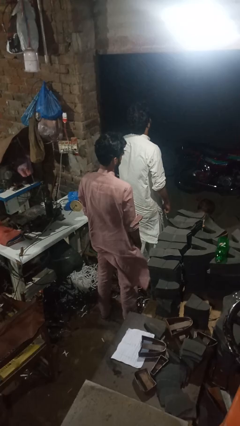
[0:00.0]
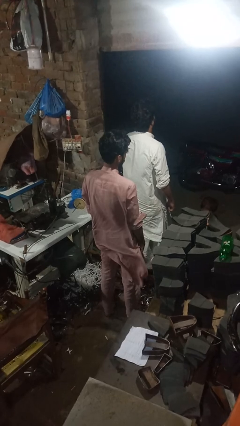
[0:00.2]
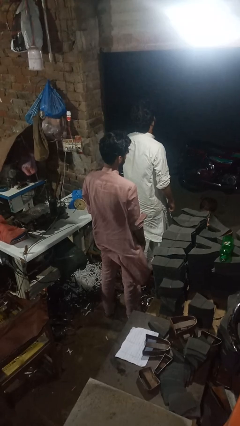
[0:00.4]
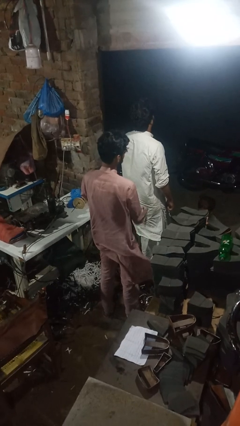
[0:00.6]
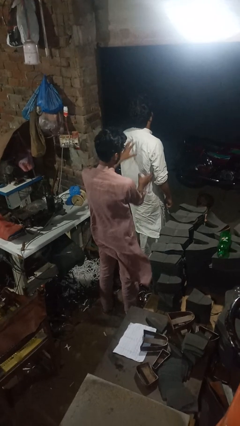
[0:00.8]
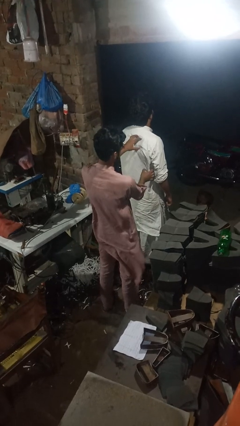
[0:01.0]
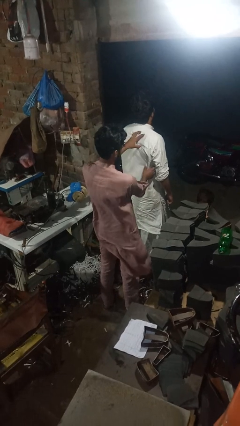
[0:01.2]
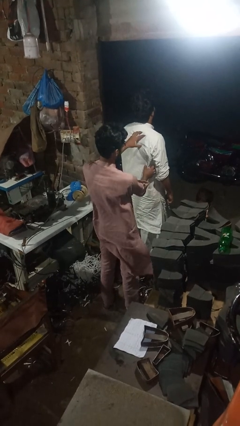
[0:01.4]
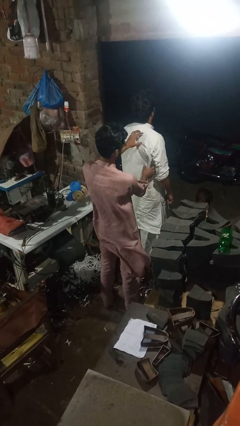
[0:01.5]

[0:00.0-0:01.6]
person tickles person

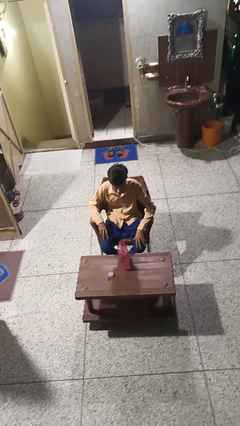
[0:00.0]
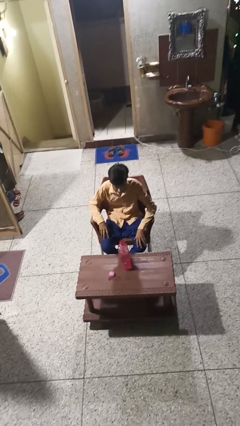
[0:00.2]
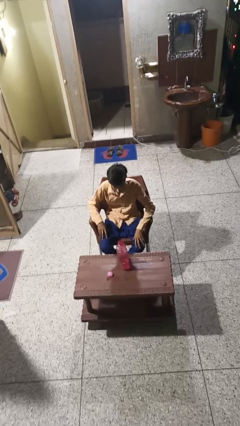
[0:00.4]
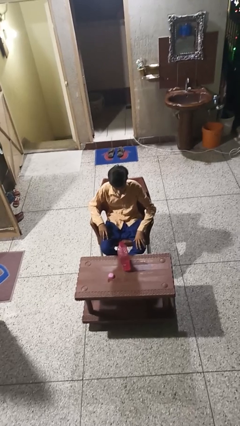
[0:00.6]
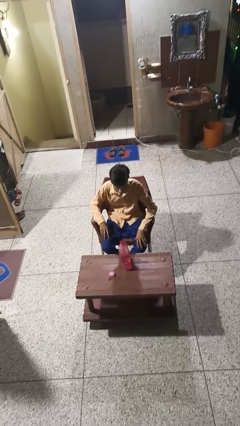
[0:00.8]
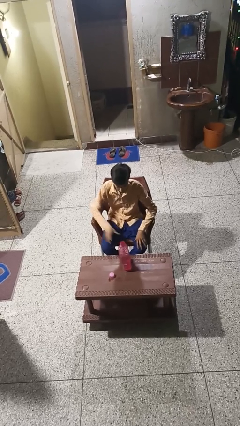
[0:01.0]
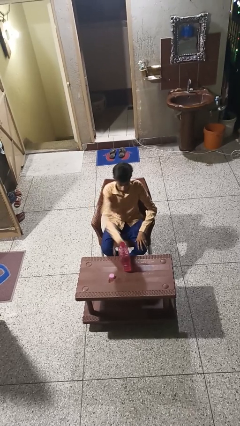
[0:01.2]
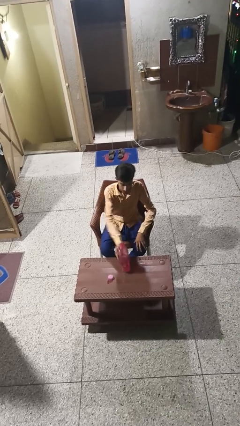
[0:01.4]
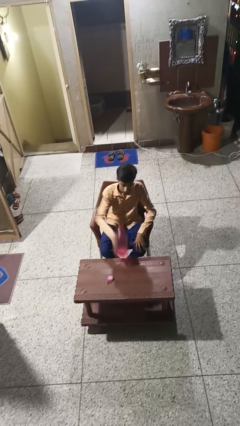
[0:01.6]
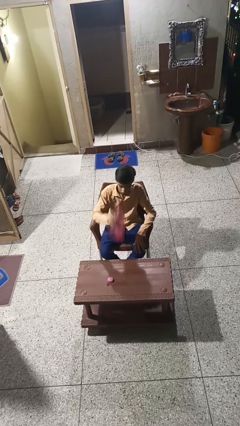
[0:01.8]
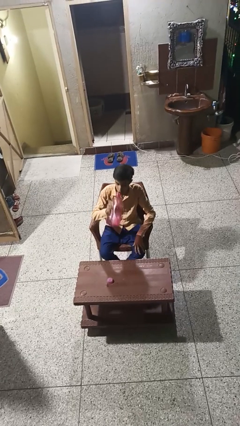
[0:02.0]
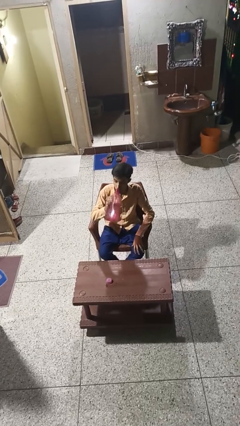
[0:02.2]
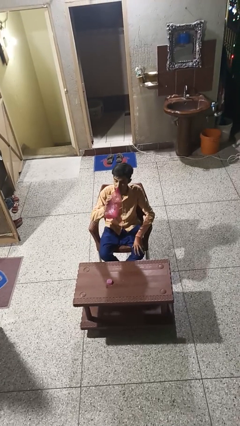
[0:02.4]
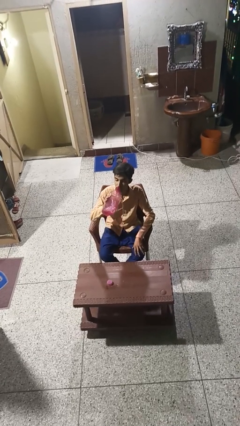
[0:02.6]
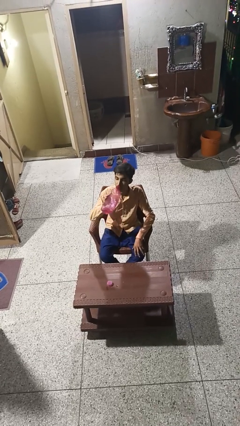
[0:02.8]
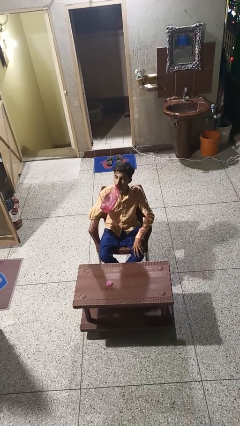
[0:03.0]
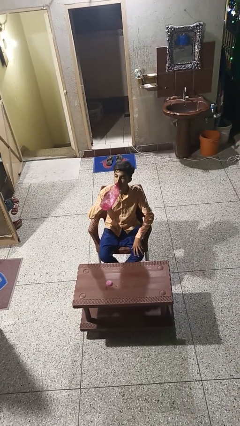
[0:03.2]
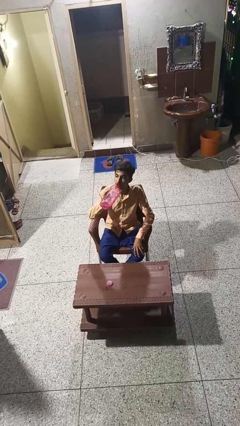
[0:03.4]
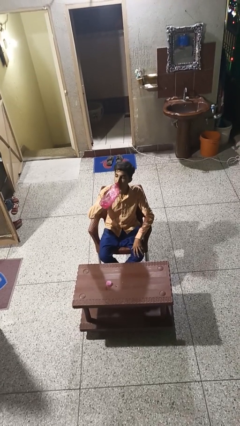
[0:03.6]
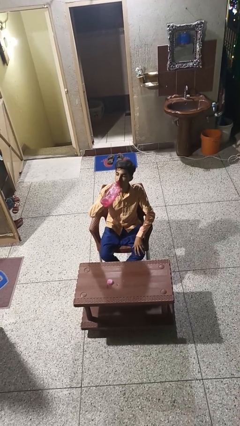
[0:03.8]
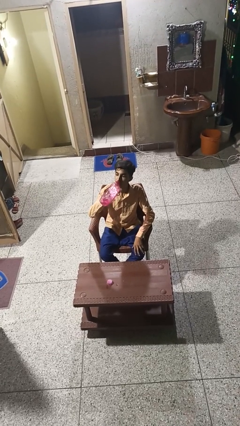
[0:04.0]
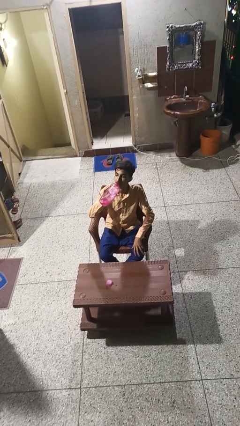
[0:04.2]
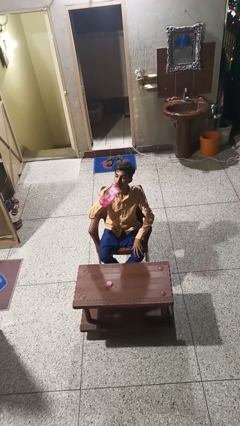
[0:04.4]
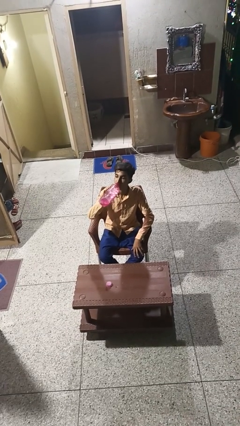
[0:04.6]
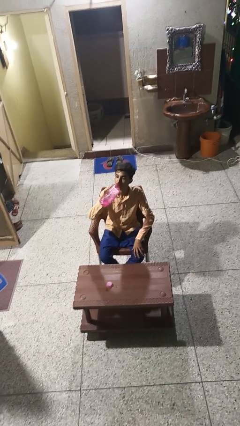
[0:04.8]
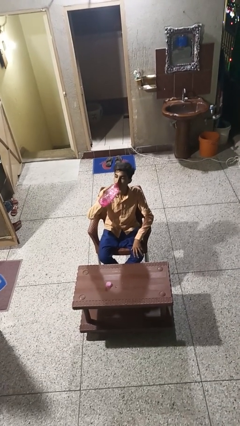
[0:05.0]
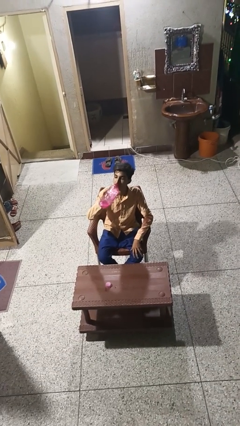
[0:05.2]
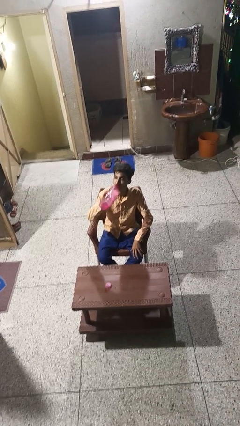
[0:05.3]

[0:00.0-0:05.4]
person drinks from bottle

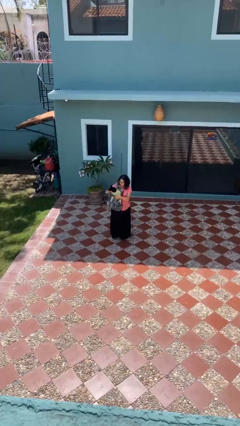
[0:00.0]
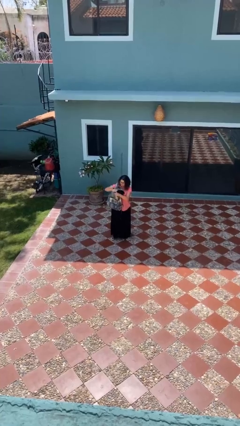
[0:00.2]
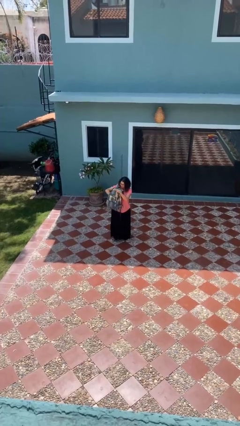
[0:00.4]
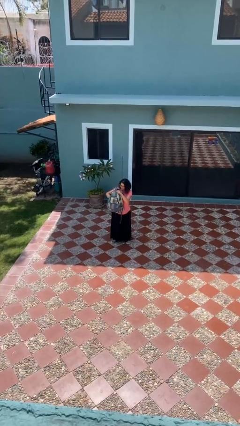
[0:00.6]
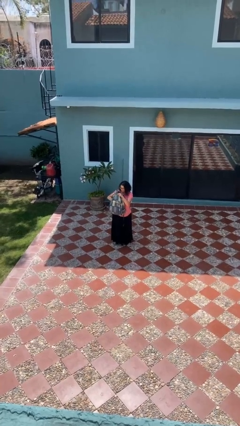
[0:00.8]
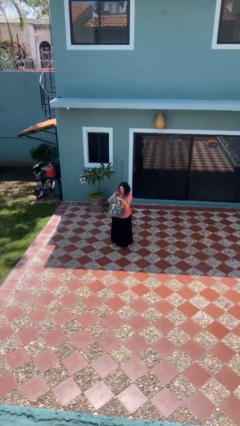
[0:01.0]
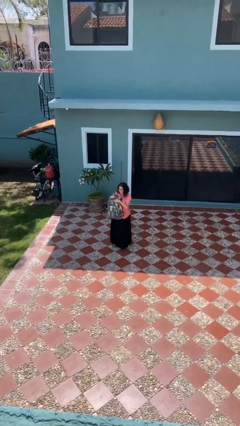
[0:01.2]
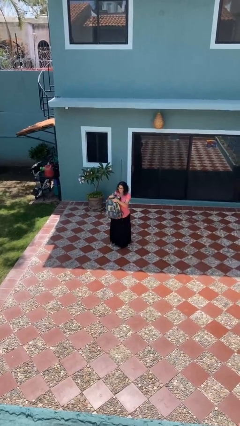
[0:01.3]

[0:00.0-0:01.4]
person puts object into backpack

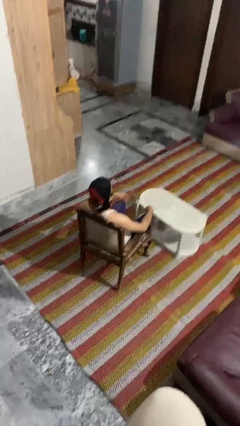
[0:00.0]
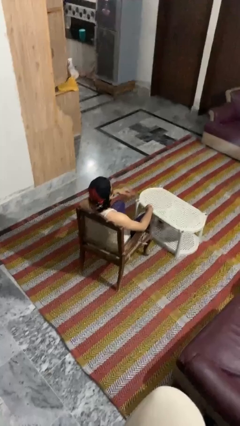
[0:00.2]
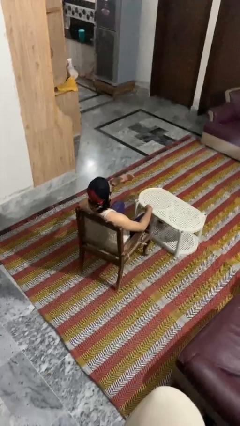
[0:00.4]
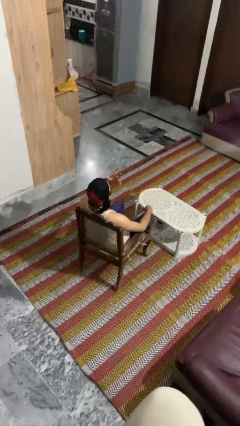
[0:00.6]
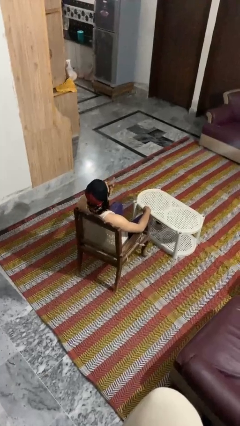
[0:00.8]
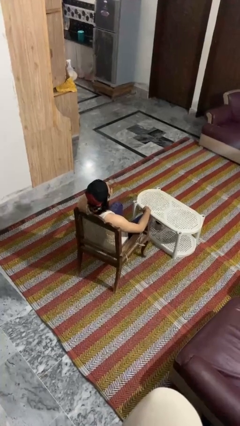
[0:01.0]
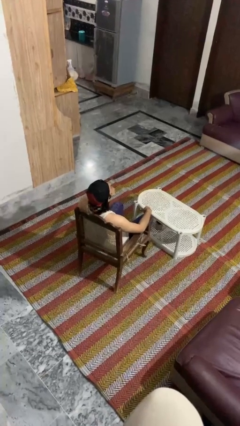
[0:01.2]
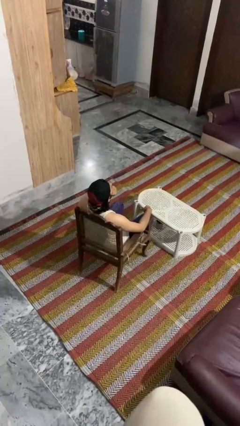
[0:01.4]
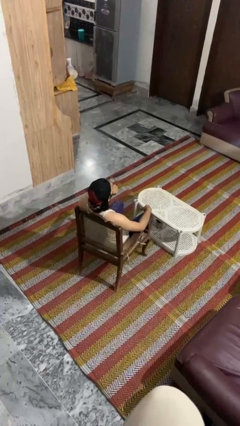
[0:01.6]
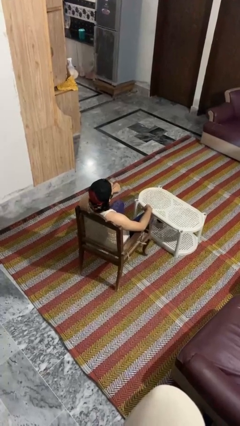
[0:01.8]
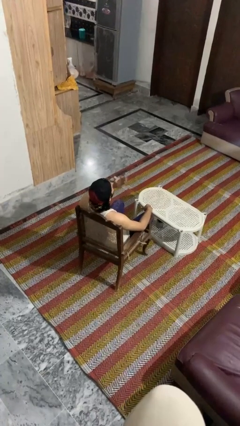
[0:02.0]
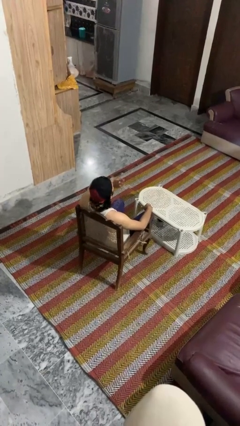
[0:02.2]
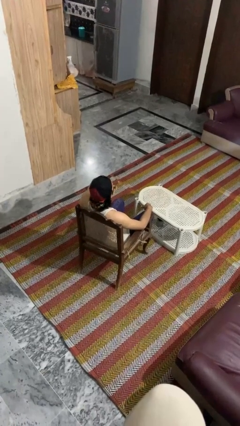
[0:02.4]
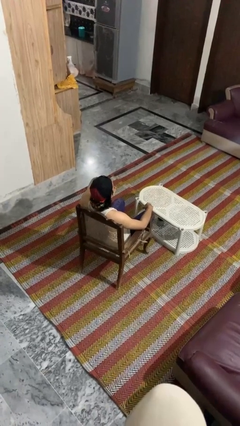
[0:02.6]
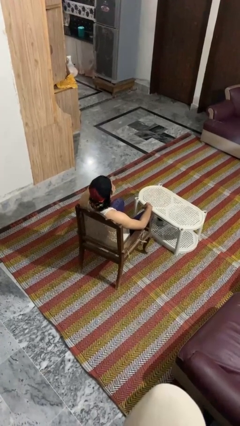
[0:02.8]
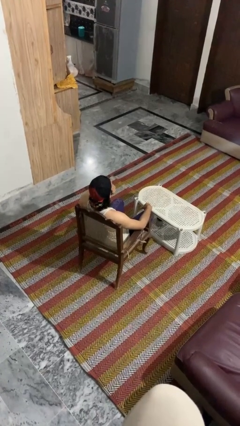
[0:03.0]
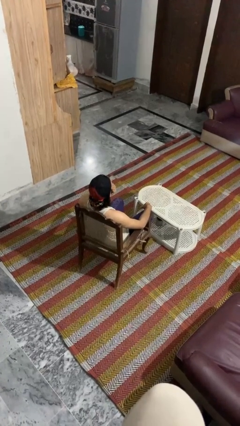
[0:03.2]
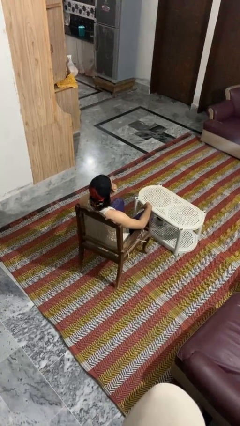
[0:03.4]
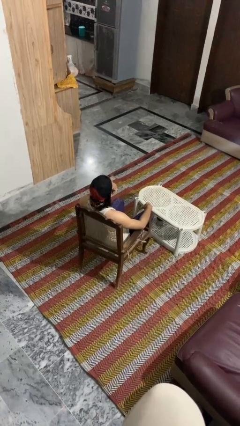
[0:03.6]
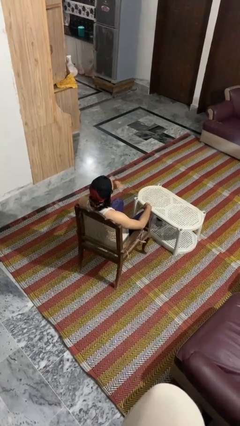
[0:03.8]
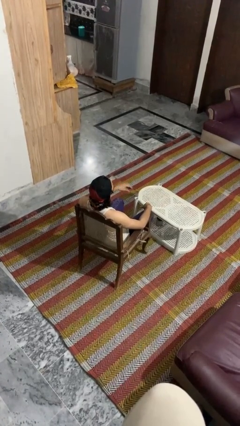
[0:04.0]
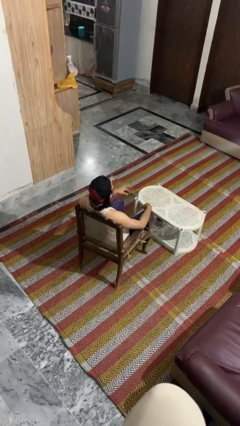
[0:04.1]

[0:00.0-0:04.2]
person strokes chin

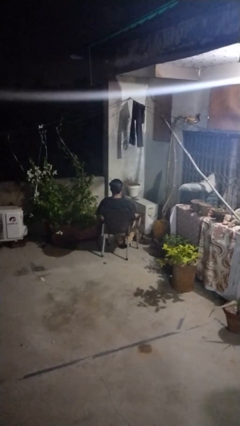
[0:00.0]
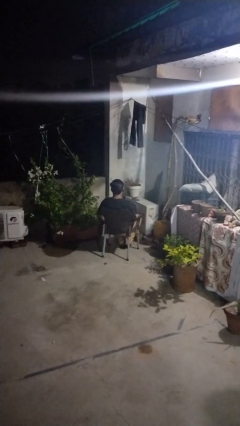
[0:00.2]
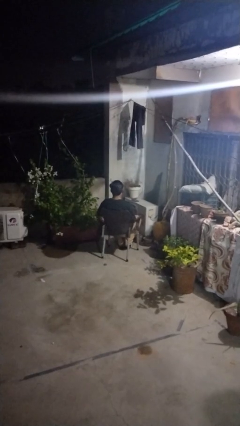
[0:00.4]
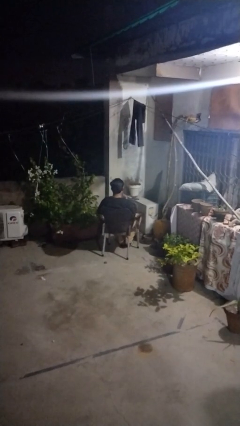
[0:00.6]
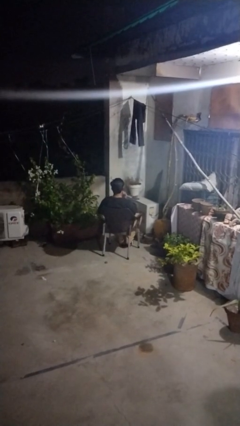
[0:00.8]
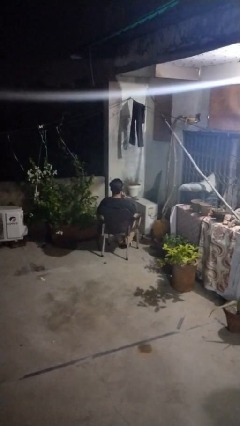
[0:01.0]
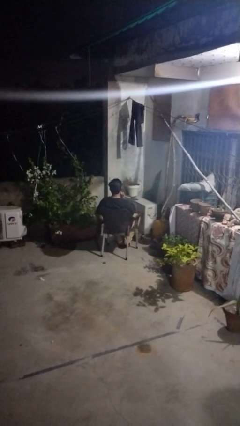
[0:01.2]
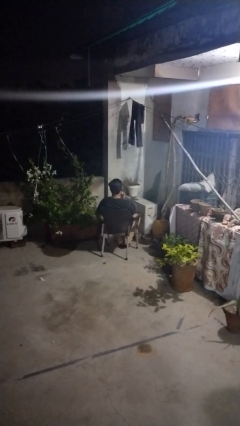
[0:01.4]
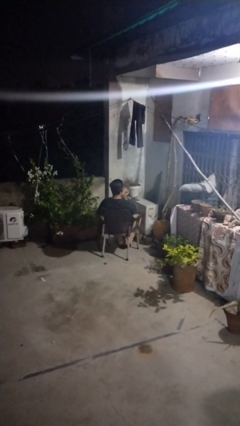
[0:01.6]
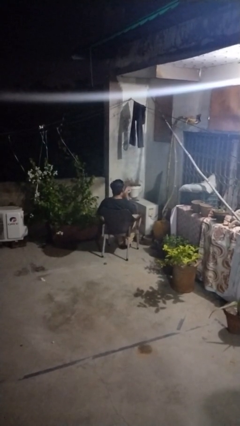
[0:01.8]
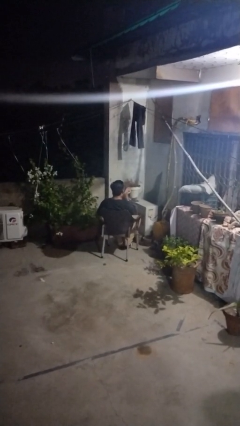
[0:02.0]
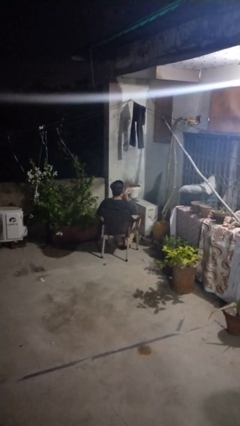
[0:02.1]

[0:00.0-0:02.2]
person gestures blow kiss

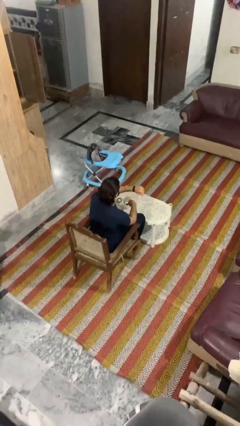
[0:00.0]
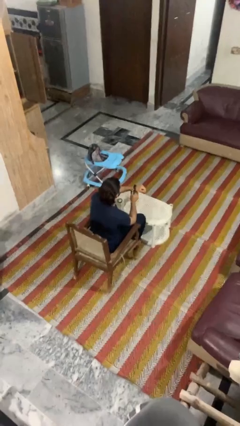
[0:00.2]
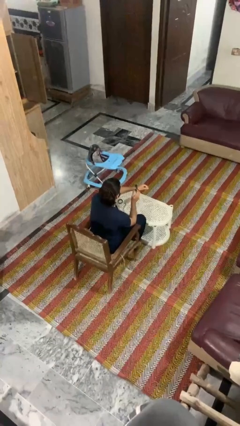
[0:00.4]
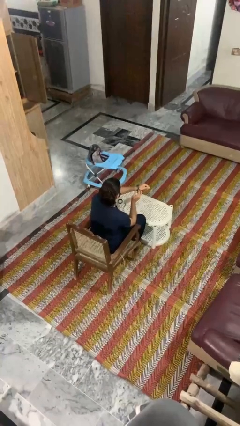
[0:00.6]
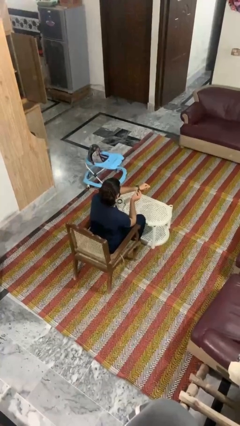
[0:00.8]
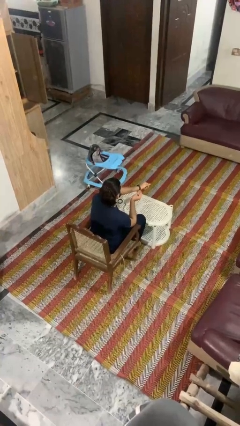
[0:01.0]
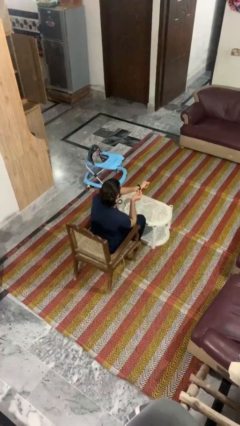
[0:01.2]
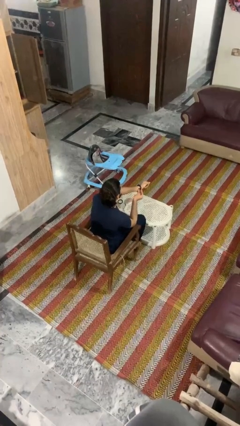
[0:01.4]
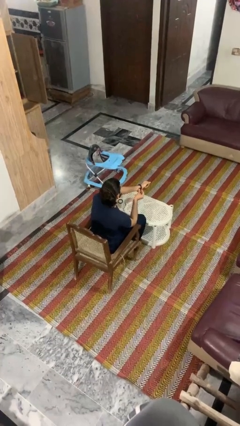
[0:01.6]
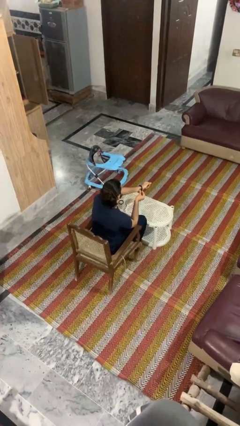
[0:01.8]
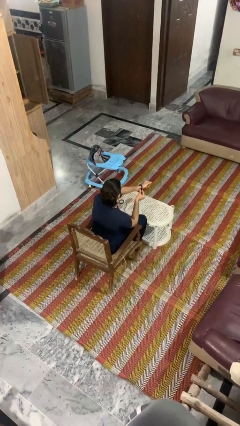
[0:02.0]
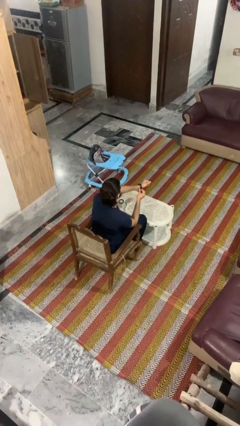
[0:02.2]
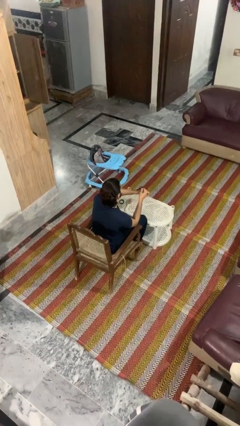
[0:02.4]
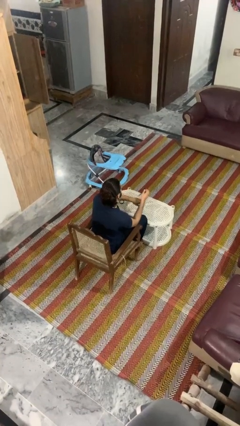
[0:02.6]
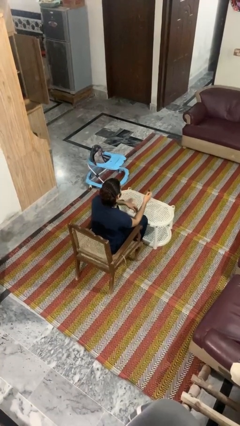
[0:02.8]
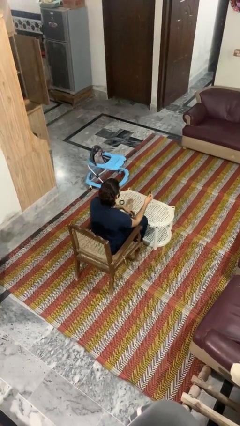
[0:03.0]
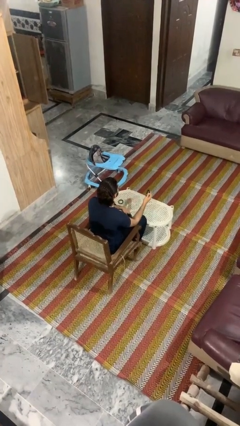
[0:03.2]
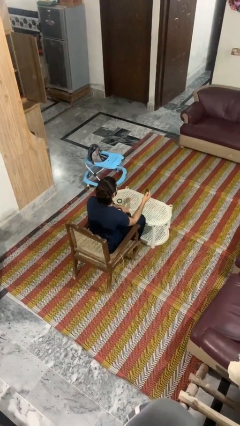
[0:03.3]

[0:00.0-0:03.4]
person takes off wristwatch
